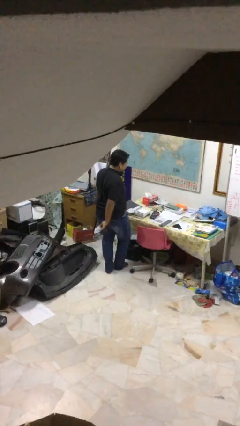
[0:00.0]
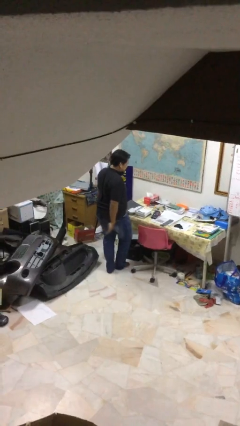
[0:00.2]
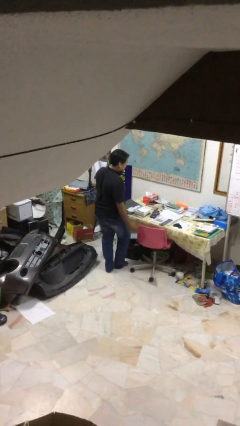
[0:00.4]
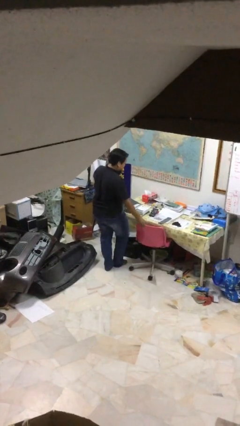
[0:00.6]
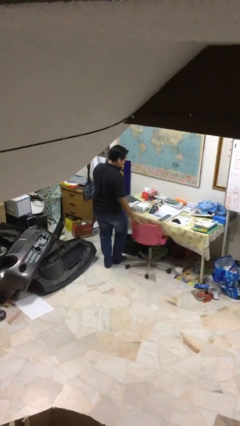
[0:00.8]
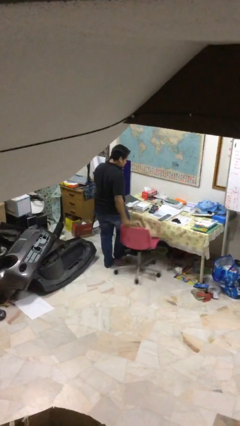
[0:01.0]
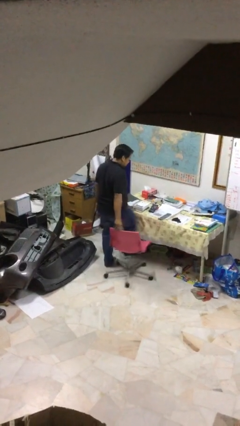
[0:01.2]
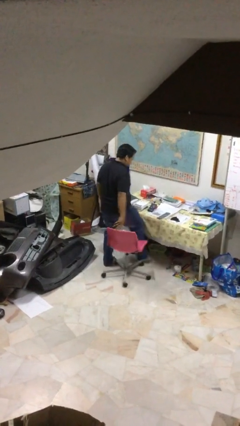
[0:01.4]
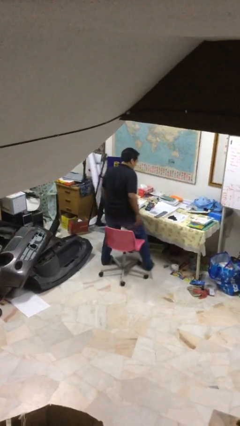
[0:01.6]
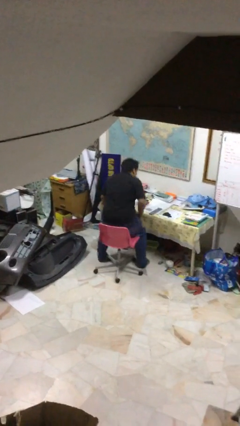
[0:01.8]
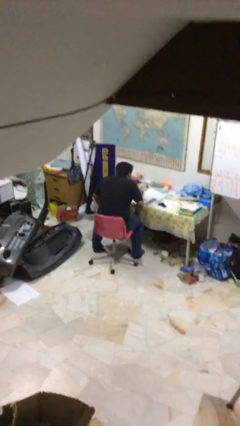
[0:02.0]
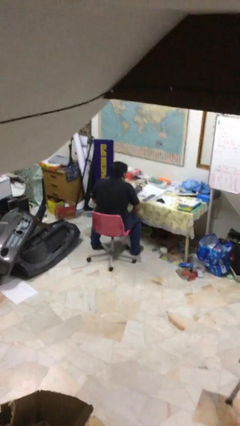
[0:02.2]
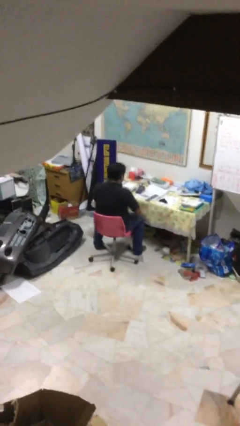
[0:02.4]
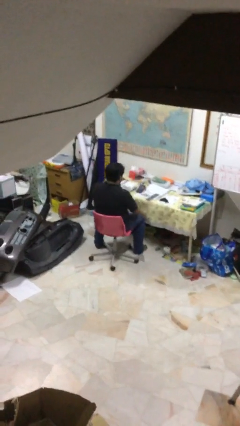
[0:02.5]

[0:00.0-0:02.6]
person sits down

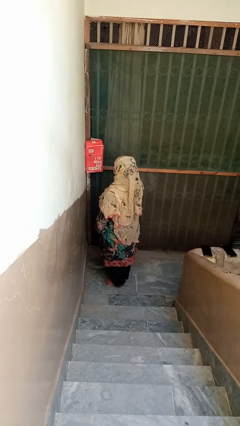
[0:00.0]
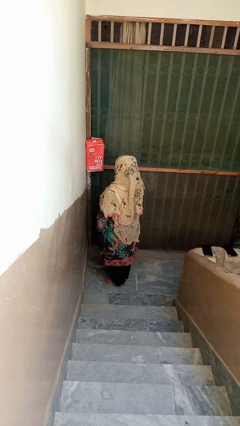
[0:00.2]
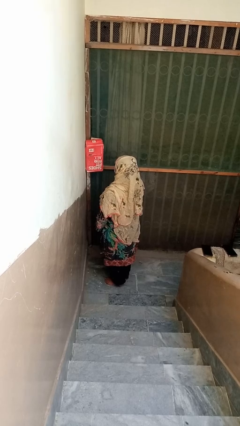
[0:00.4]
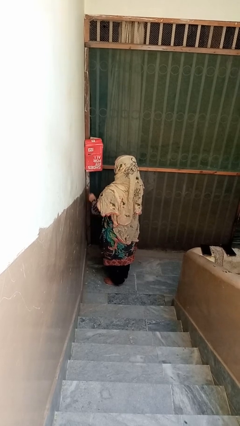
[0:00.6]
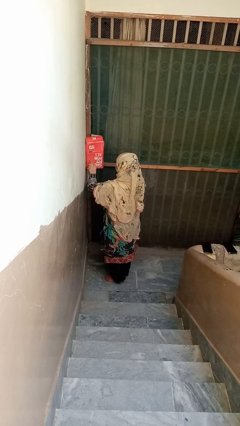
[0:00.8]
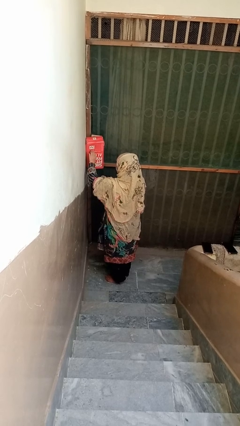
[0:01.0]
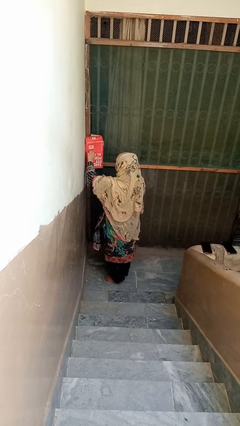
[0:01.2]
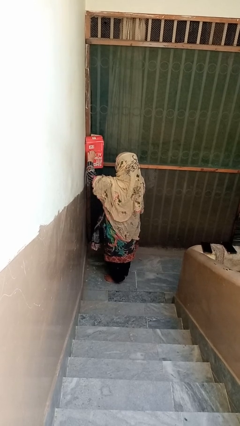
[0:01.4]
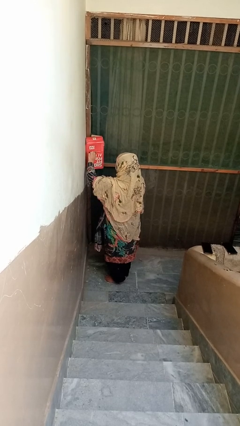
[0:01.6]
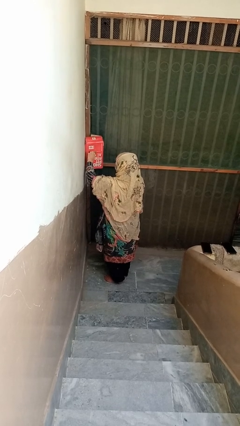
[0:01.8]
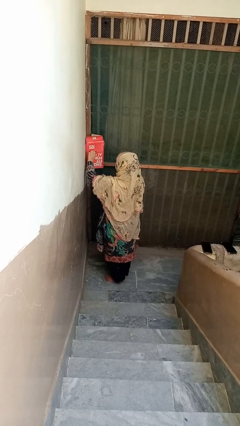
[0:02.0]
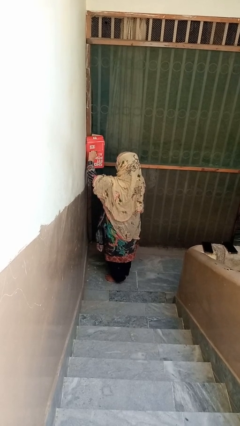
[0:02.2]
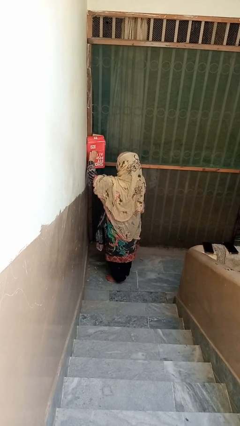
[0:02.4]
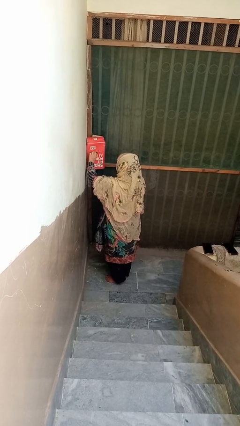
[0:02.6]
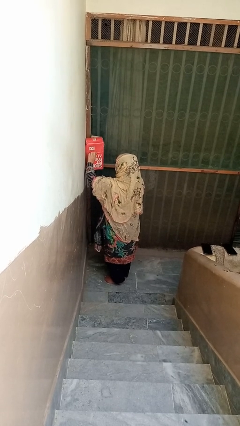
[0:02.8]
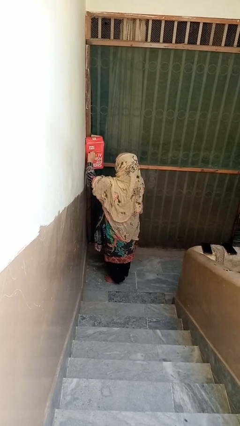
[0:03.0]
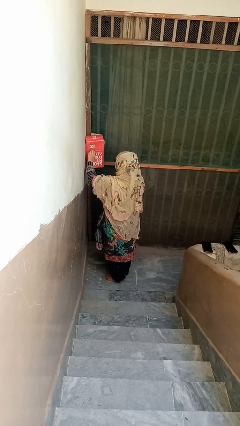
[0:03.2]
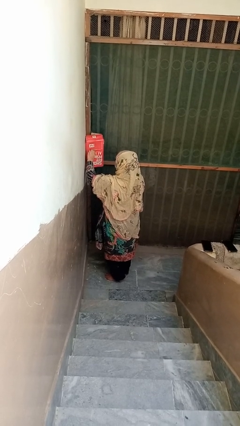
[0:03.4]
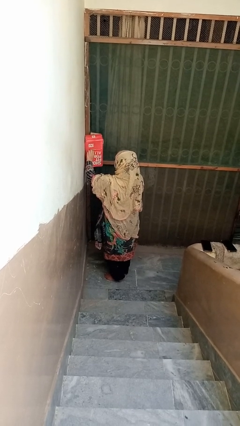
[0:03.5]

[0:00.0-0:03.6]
person opens mailbox

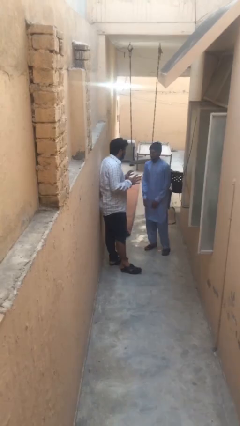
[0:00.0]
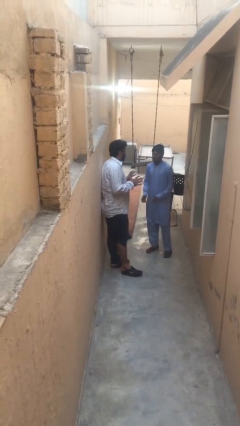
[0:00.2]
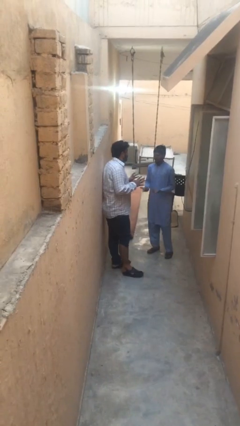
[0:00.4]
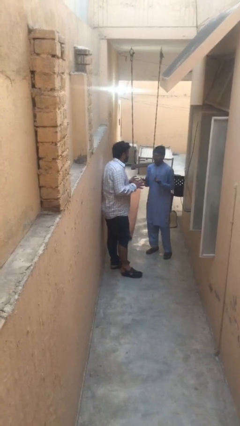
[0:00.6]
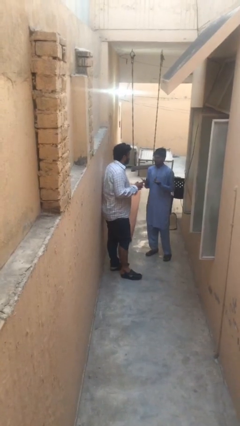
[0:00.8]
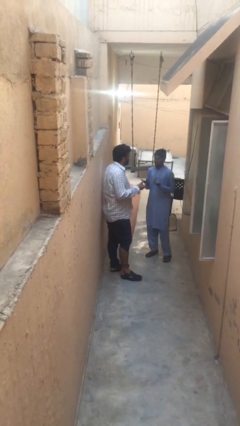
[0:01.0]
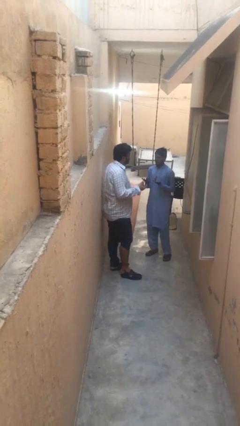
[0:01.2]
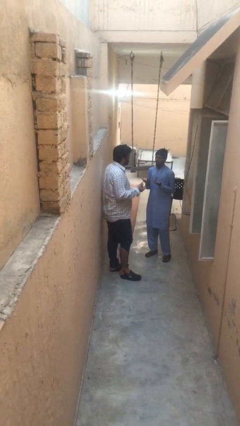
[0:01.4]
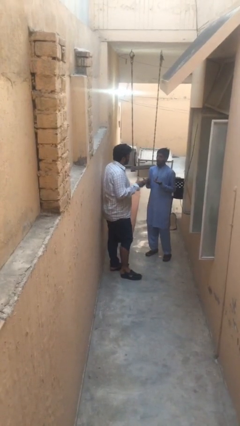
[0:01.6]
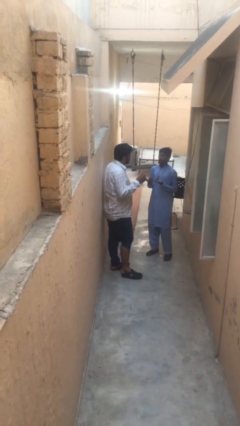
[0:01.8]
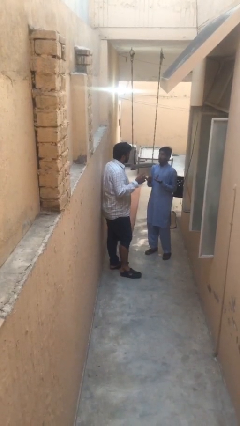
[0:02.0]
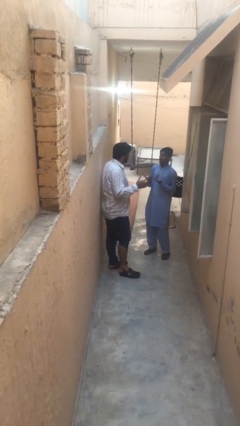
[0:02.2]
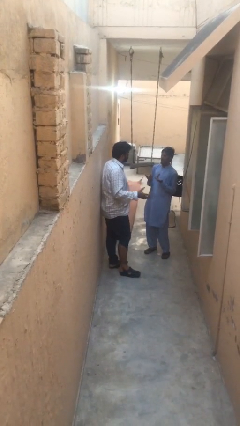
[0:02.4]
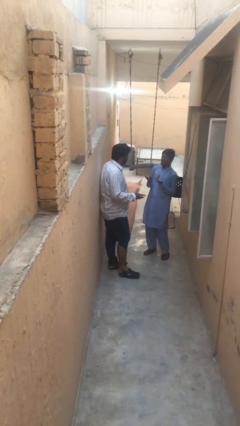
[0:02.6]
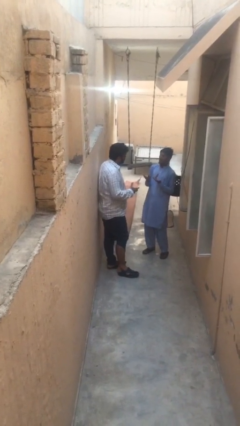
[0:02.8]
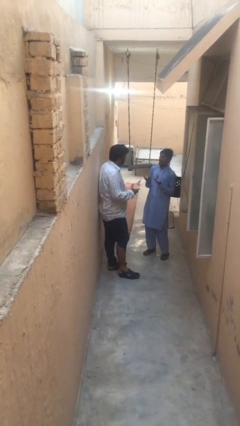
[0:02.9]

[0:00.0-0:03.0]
person talks to person

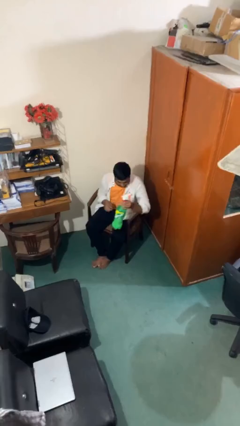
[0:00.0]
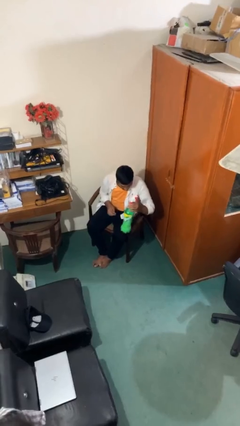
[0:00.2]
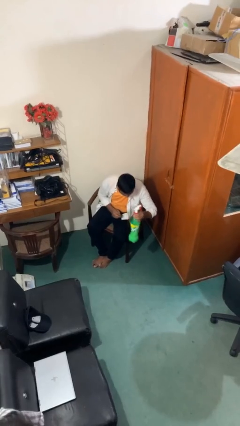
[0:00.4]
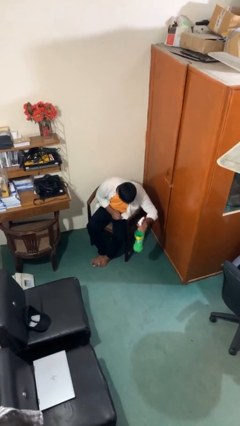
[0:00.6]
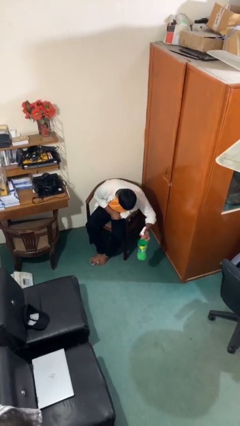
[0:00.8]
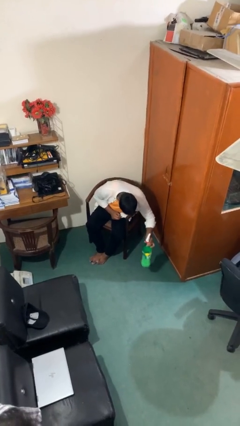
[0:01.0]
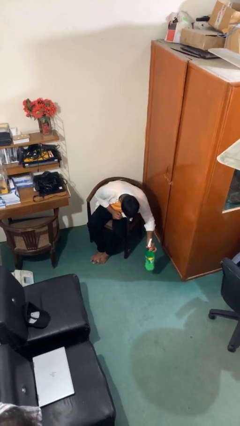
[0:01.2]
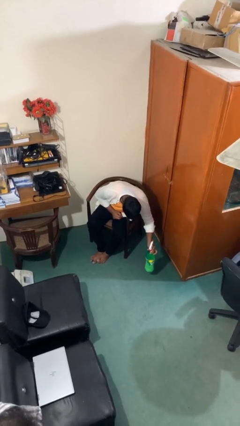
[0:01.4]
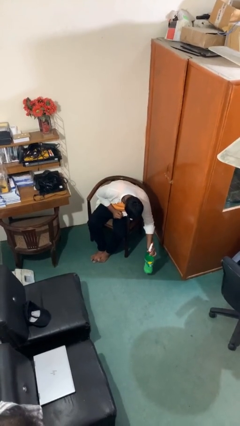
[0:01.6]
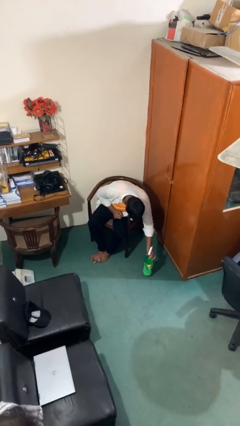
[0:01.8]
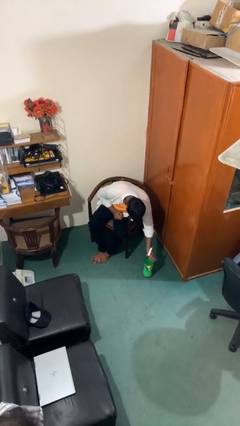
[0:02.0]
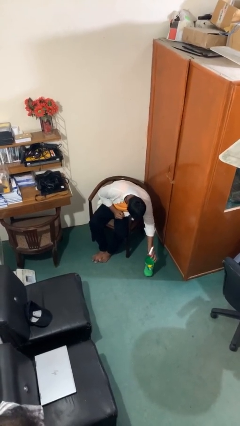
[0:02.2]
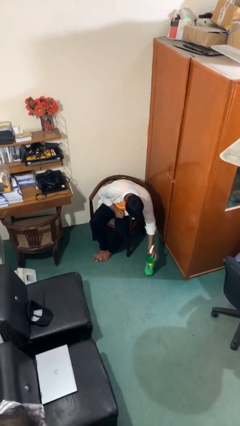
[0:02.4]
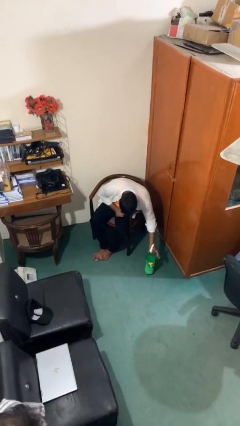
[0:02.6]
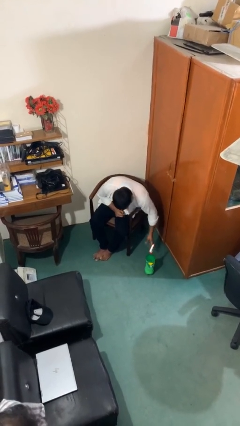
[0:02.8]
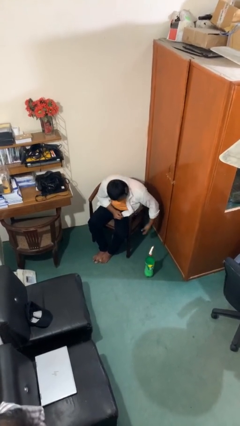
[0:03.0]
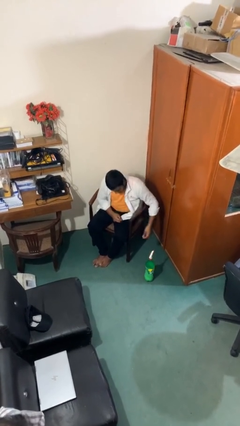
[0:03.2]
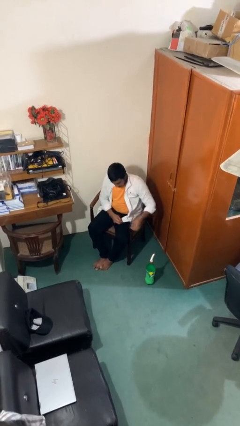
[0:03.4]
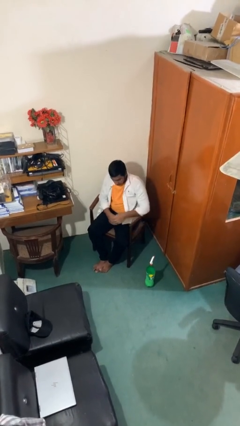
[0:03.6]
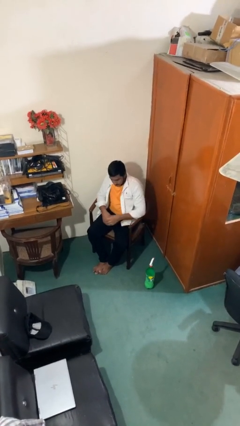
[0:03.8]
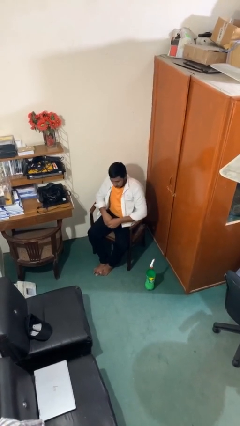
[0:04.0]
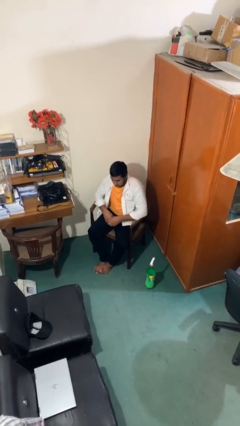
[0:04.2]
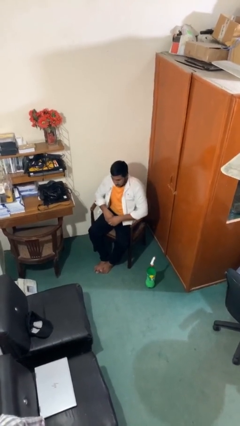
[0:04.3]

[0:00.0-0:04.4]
person puts down object on floor

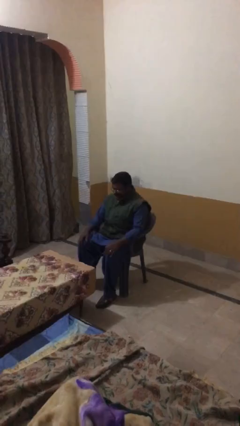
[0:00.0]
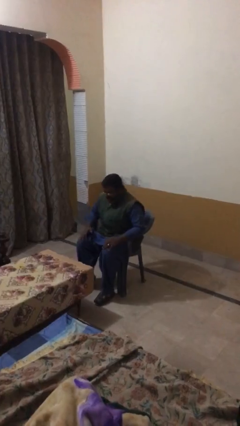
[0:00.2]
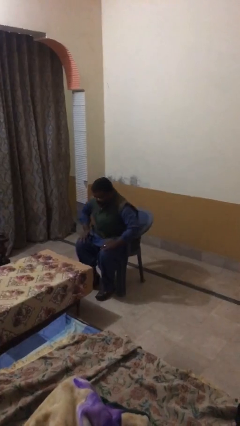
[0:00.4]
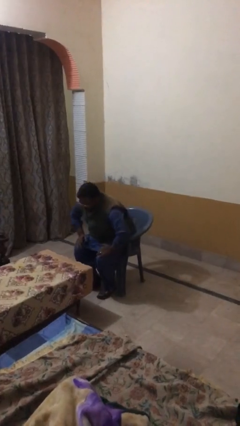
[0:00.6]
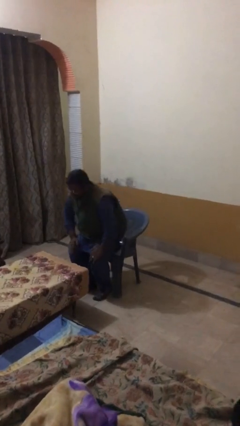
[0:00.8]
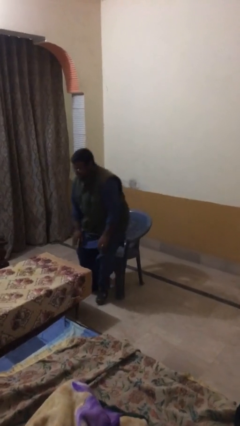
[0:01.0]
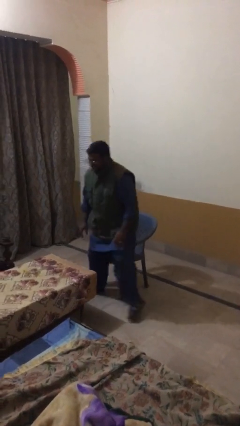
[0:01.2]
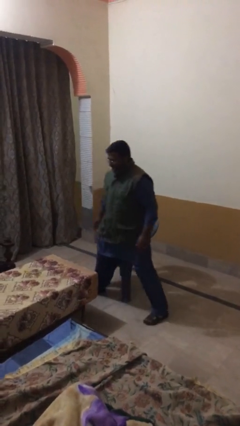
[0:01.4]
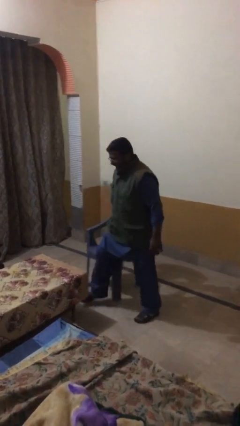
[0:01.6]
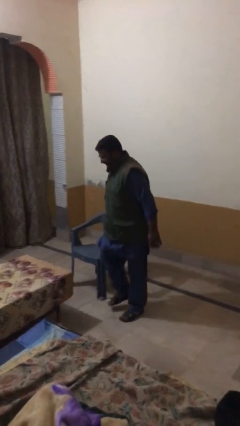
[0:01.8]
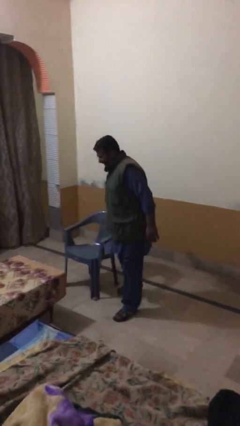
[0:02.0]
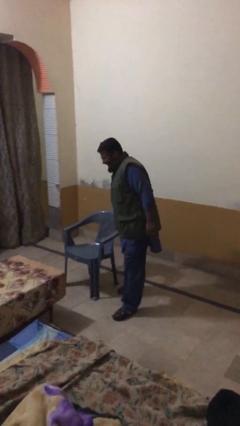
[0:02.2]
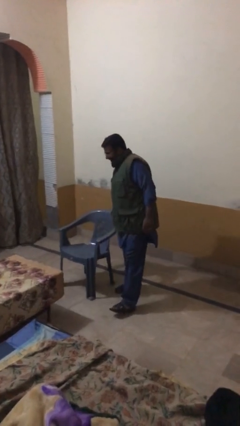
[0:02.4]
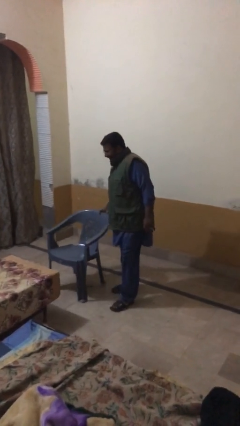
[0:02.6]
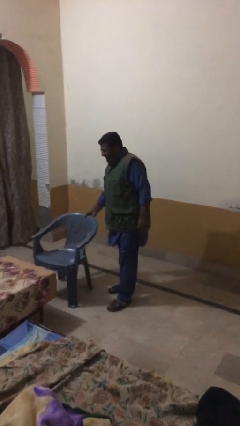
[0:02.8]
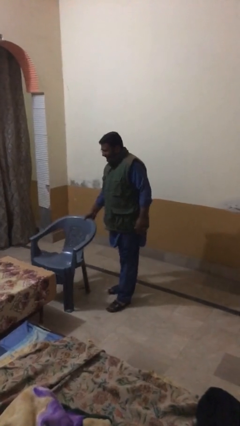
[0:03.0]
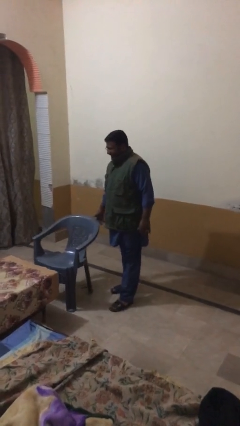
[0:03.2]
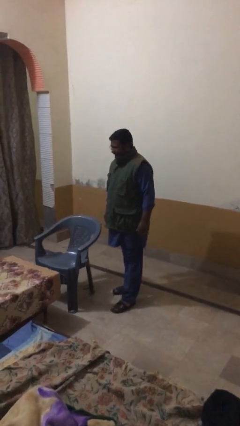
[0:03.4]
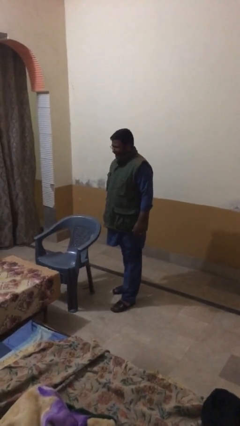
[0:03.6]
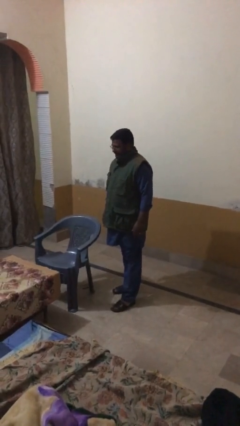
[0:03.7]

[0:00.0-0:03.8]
person stands up
